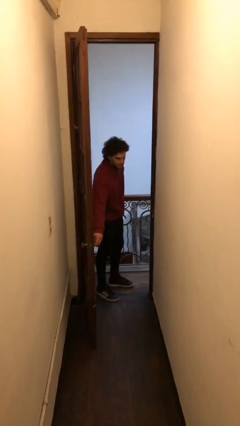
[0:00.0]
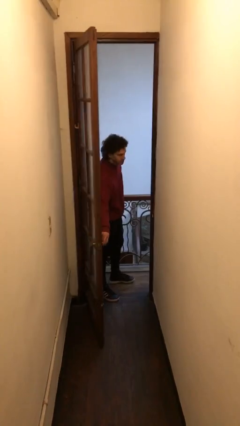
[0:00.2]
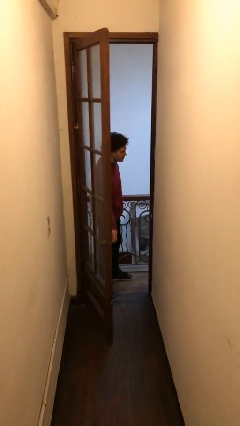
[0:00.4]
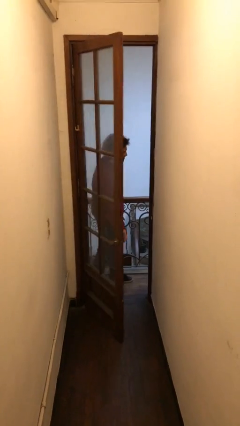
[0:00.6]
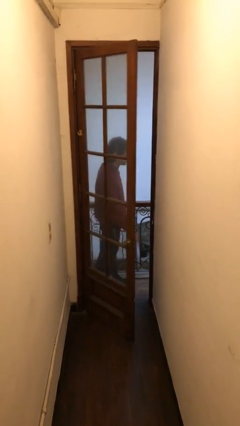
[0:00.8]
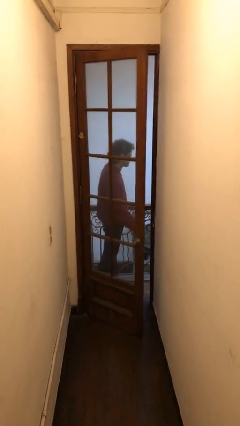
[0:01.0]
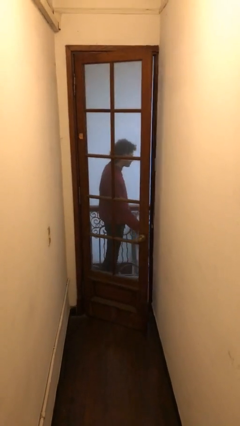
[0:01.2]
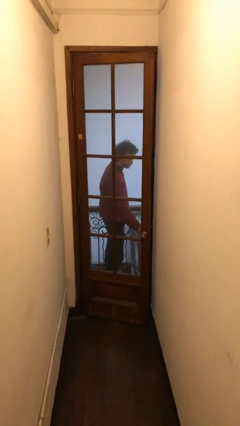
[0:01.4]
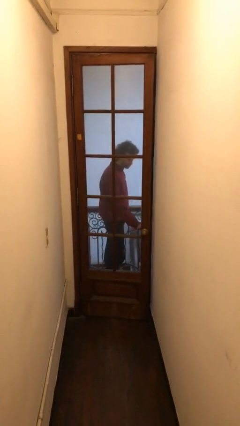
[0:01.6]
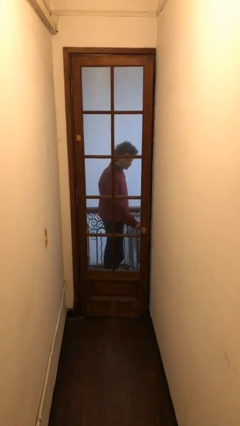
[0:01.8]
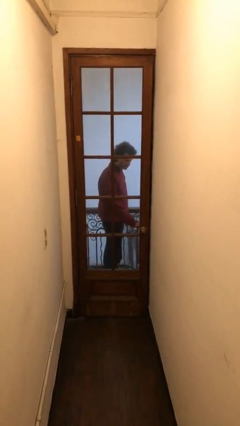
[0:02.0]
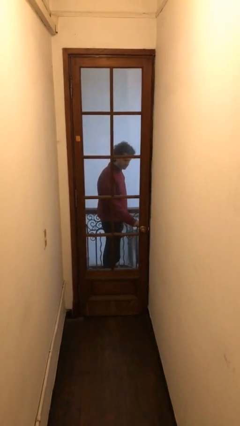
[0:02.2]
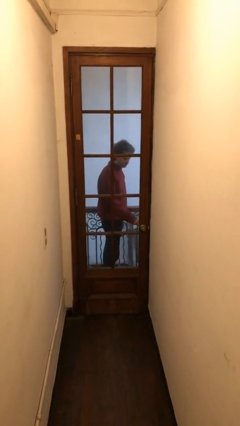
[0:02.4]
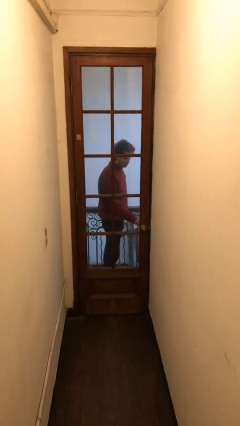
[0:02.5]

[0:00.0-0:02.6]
person closes facility door

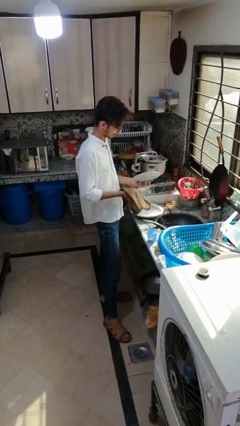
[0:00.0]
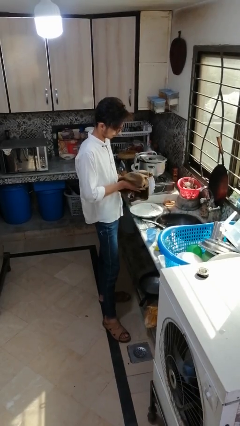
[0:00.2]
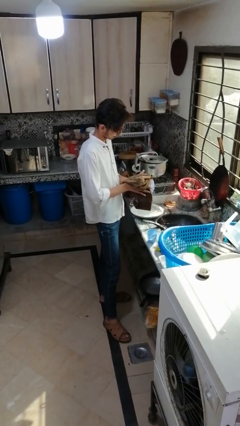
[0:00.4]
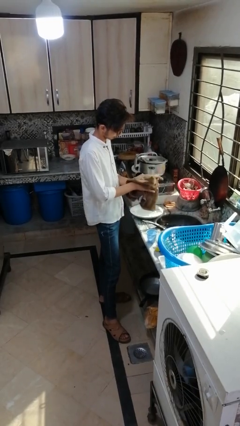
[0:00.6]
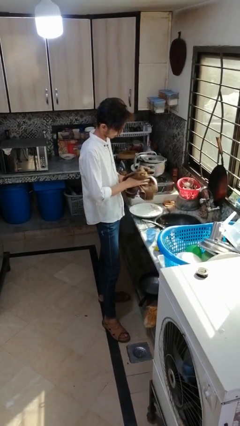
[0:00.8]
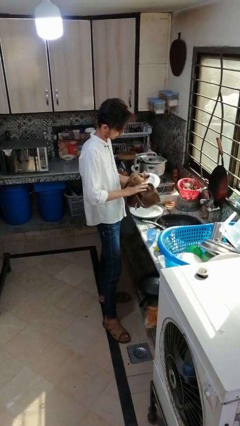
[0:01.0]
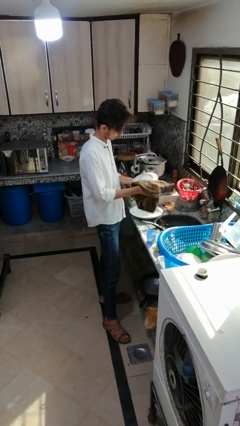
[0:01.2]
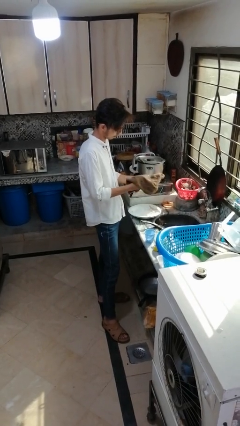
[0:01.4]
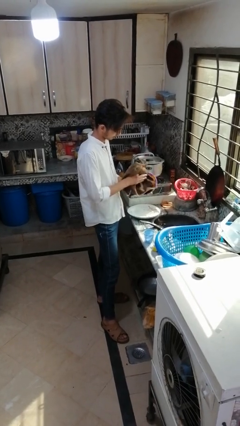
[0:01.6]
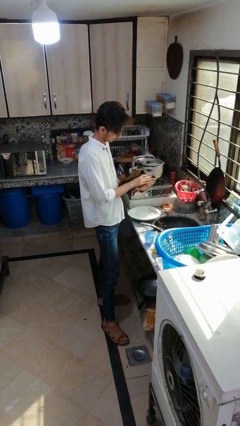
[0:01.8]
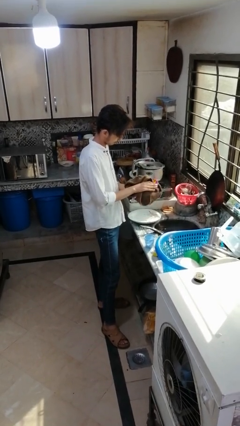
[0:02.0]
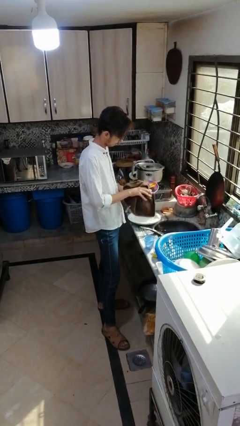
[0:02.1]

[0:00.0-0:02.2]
person dries dish

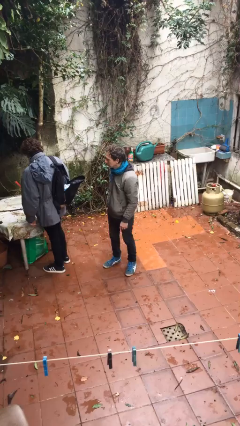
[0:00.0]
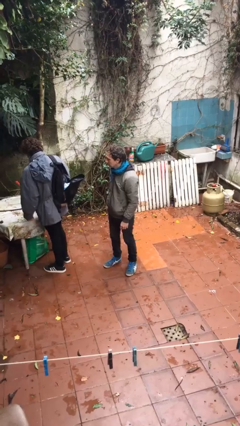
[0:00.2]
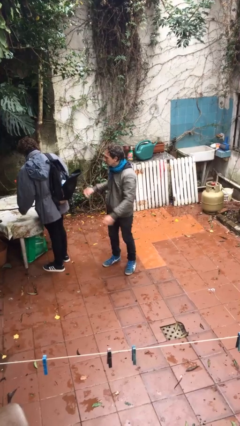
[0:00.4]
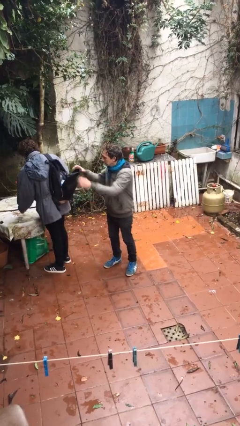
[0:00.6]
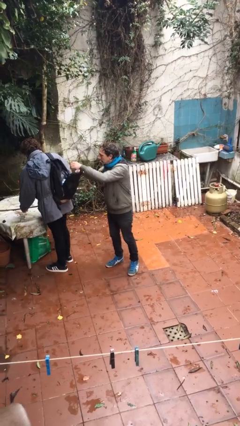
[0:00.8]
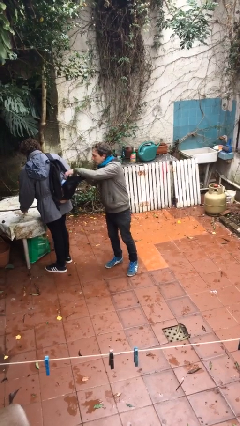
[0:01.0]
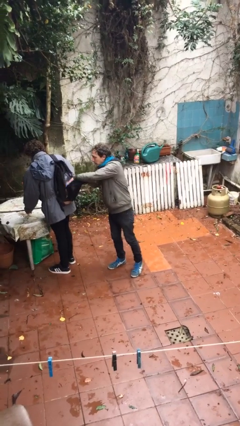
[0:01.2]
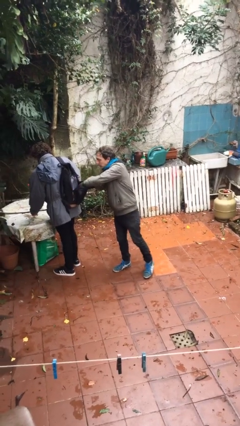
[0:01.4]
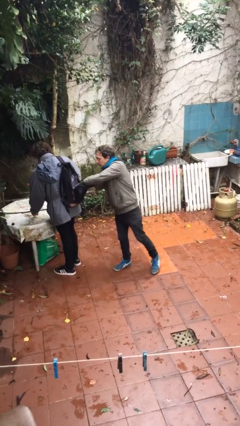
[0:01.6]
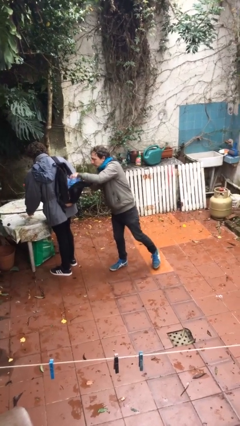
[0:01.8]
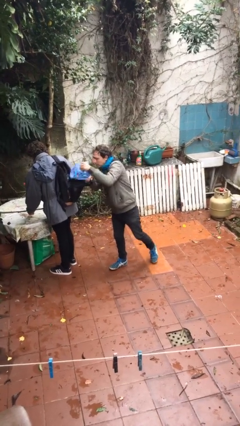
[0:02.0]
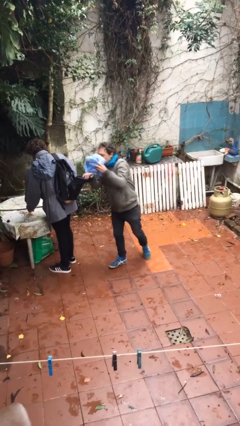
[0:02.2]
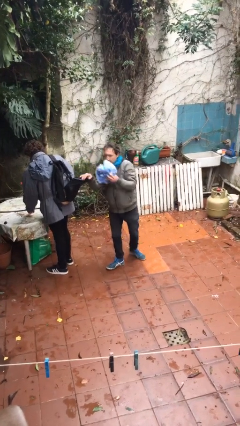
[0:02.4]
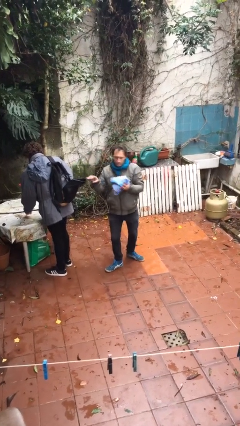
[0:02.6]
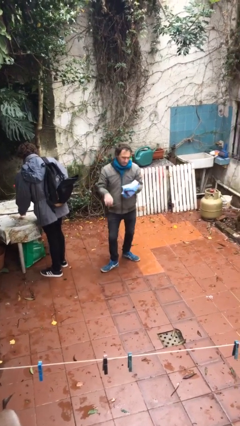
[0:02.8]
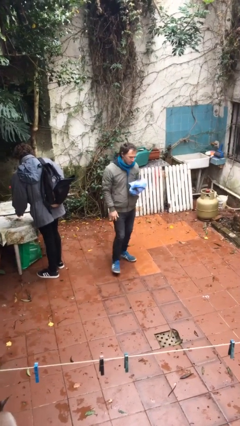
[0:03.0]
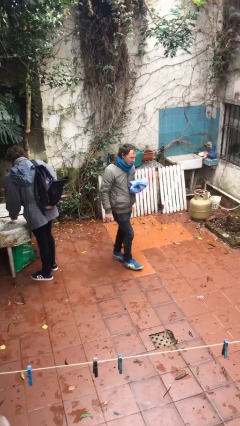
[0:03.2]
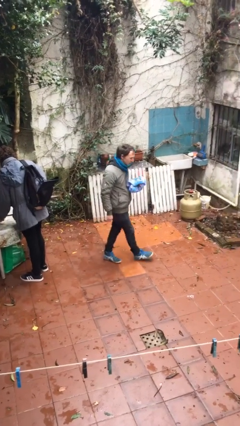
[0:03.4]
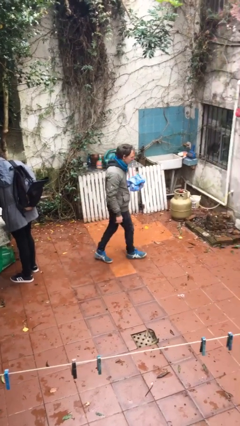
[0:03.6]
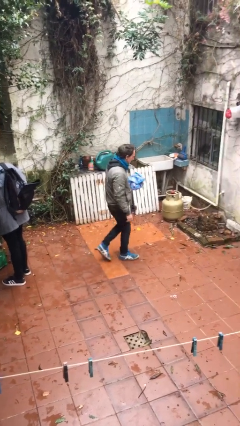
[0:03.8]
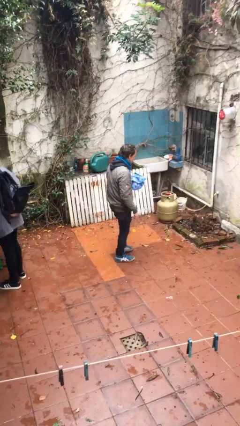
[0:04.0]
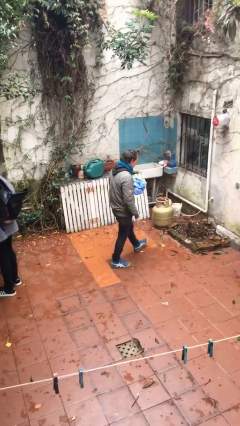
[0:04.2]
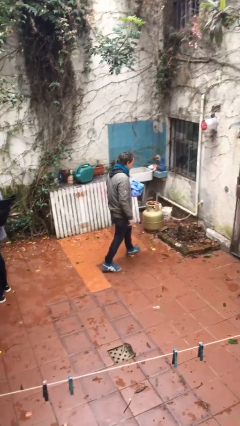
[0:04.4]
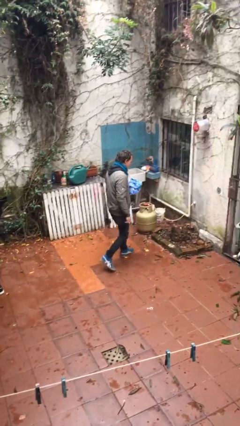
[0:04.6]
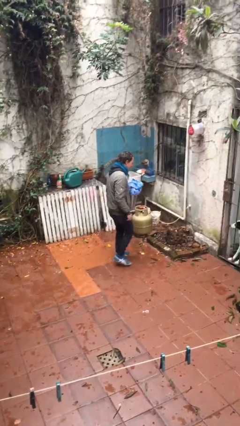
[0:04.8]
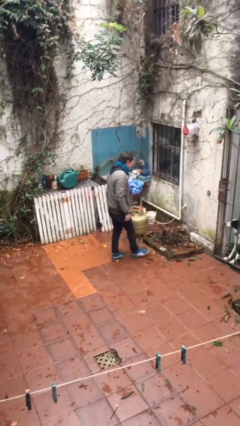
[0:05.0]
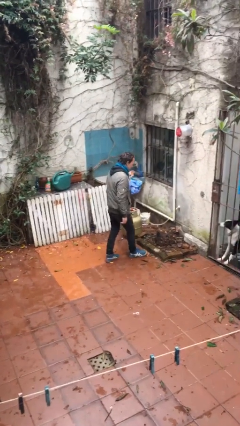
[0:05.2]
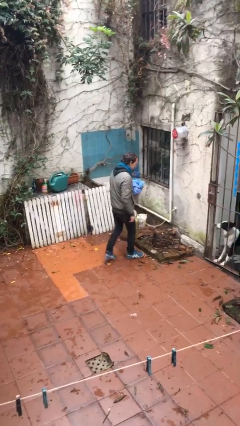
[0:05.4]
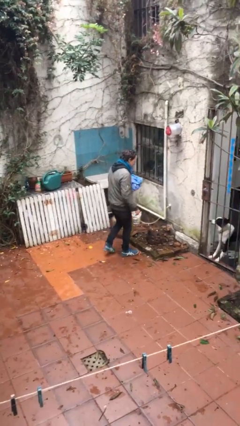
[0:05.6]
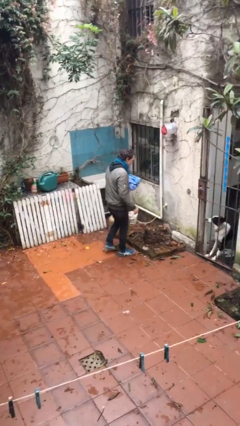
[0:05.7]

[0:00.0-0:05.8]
person steals object from person

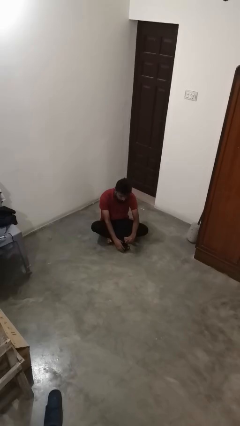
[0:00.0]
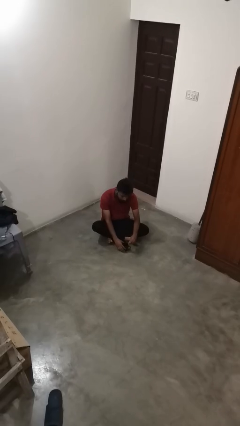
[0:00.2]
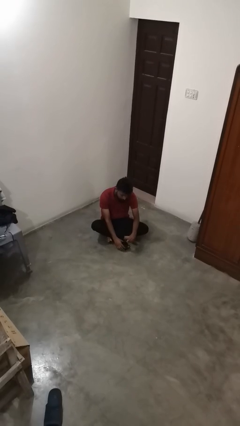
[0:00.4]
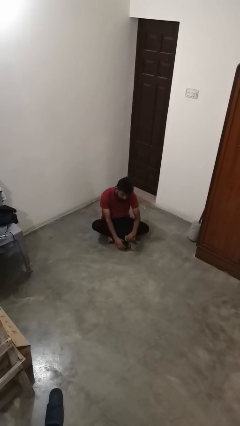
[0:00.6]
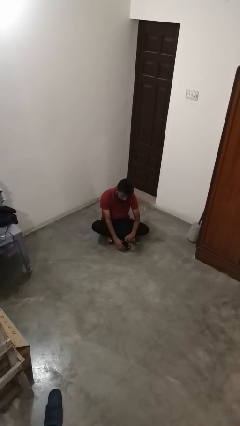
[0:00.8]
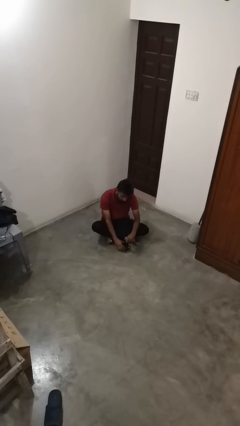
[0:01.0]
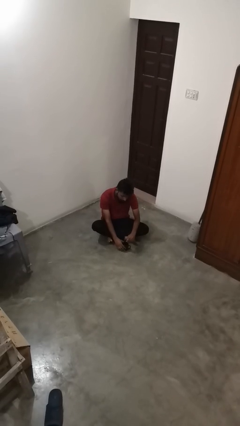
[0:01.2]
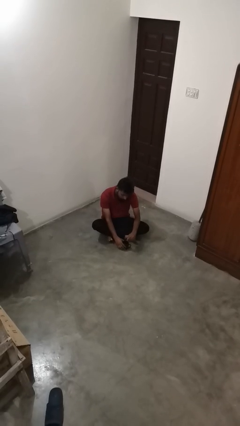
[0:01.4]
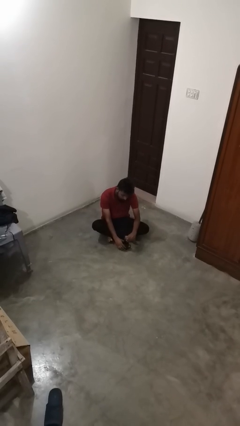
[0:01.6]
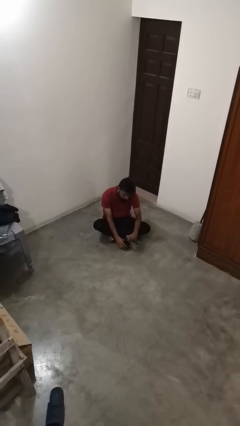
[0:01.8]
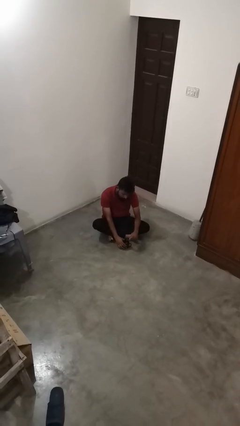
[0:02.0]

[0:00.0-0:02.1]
person stirs mug

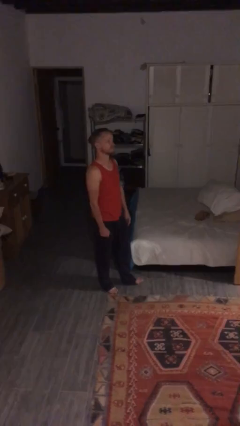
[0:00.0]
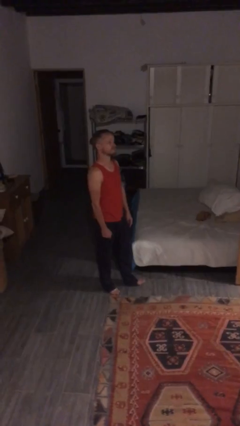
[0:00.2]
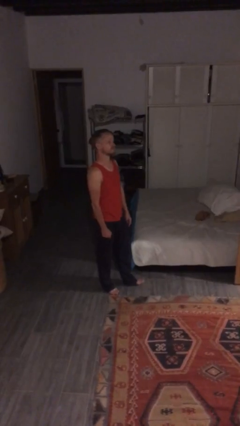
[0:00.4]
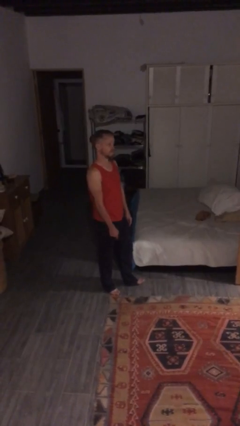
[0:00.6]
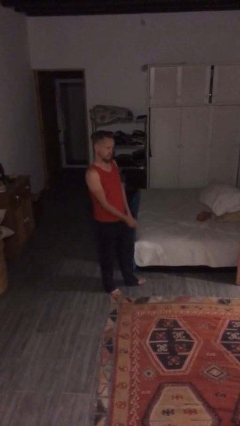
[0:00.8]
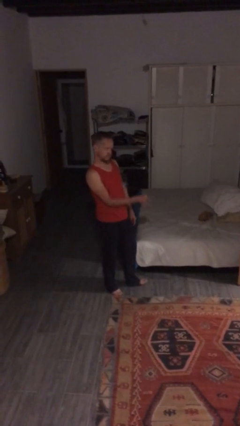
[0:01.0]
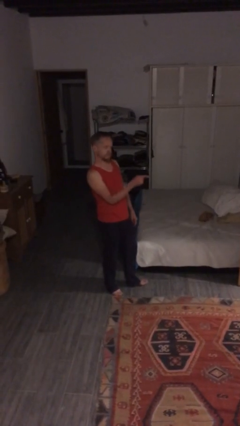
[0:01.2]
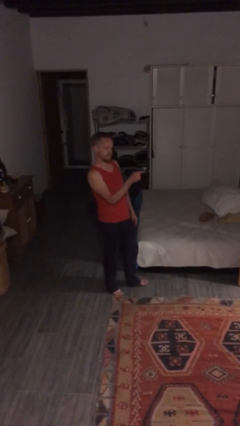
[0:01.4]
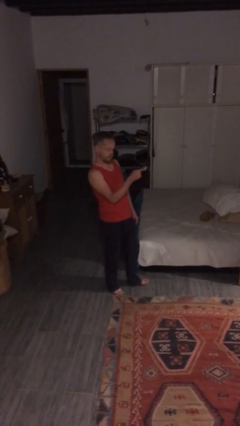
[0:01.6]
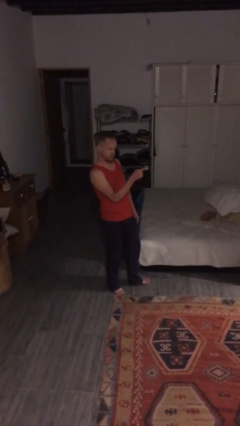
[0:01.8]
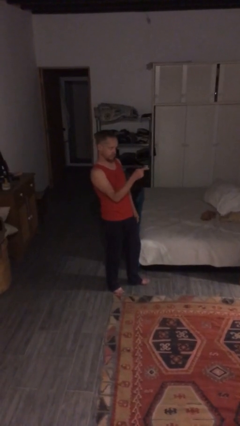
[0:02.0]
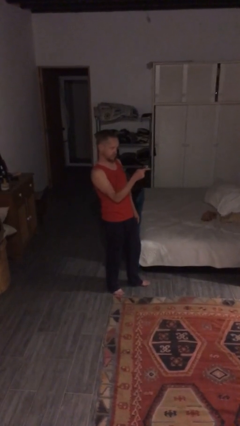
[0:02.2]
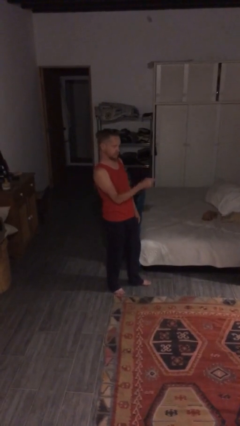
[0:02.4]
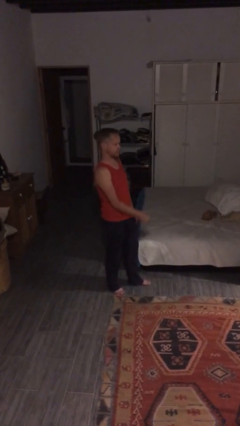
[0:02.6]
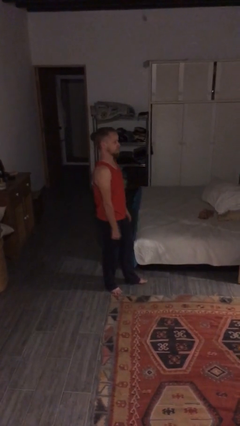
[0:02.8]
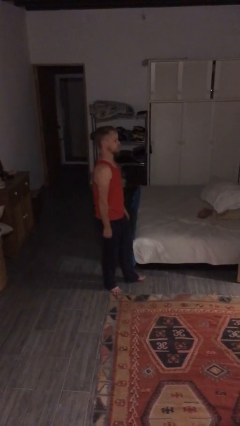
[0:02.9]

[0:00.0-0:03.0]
person points at person

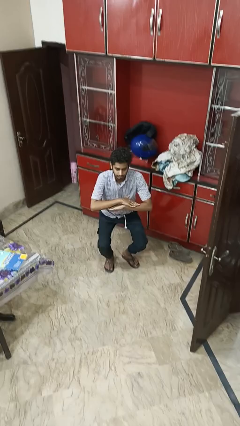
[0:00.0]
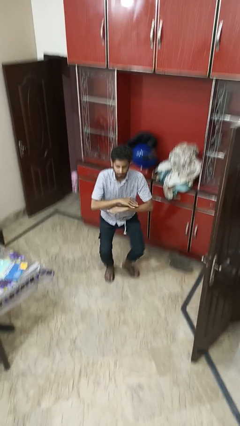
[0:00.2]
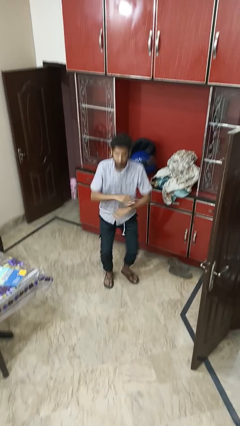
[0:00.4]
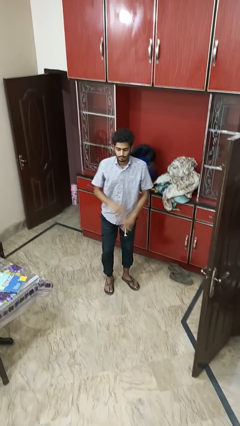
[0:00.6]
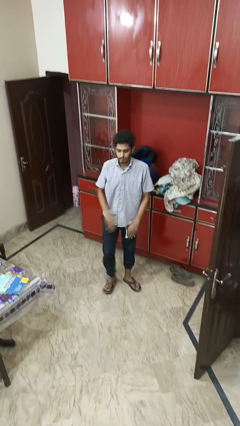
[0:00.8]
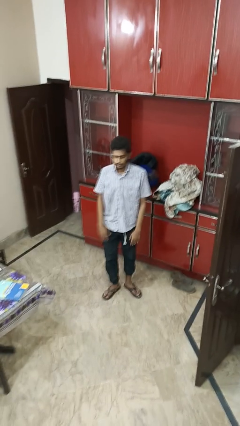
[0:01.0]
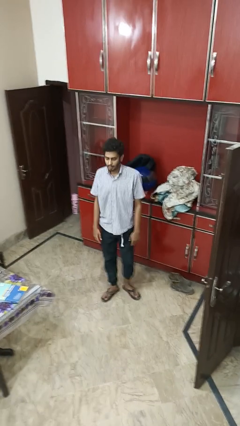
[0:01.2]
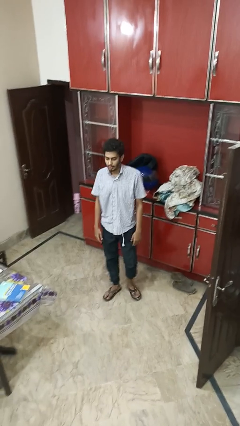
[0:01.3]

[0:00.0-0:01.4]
person stands up
